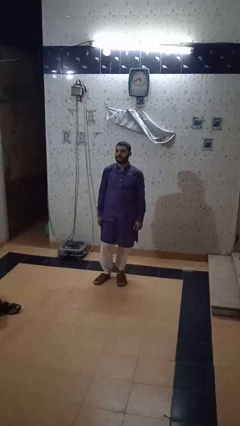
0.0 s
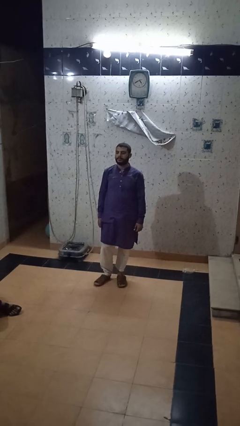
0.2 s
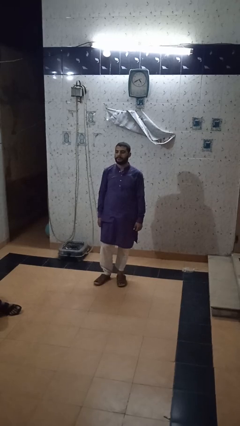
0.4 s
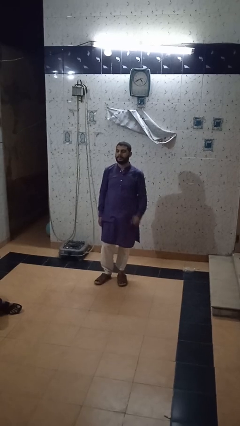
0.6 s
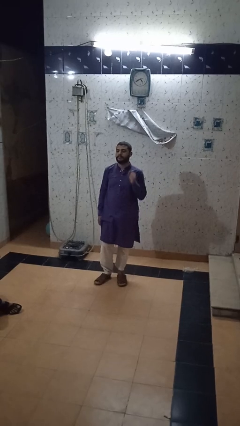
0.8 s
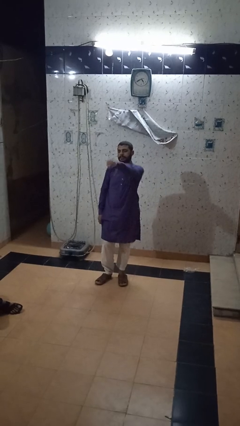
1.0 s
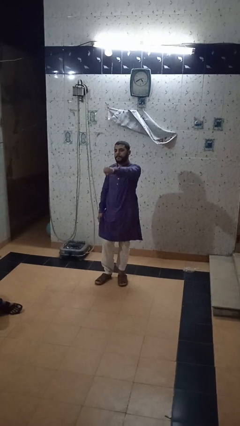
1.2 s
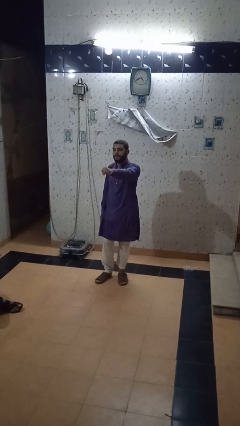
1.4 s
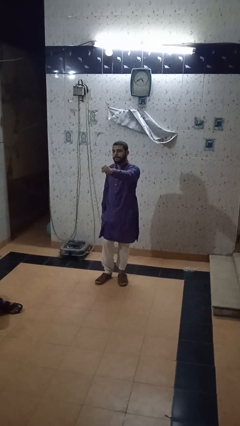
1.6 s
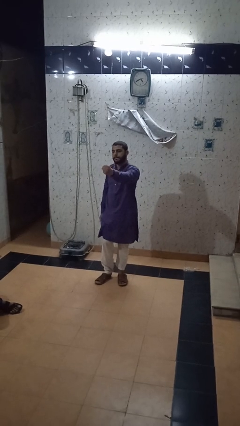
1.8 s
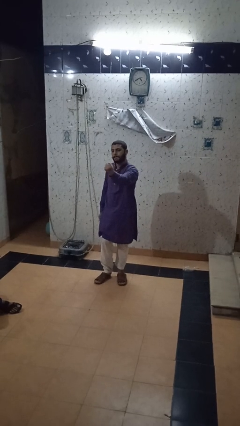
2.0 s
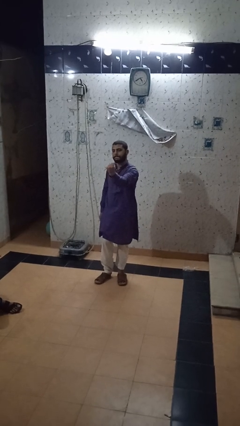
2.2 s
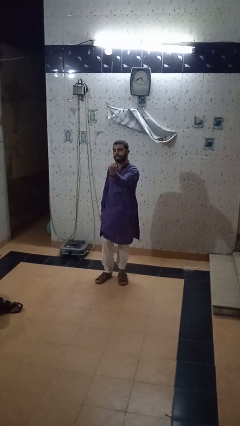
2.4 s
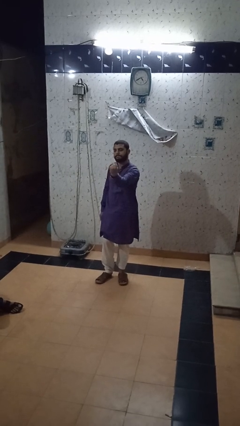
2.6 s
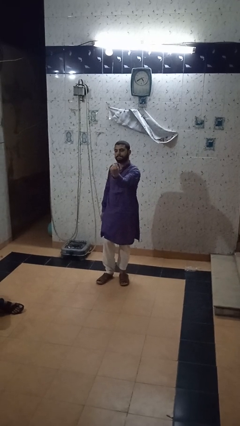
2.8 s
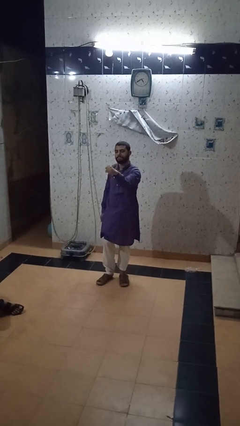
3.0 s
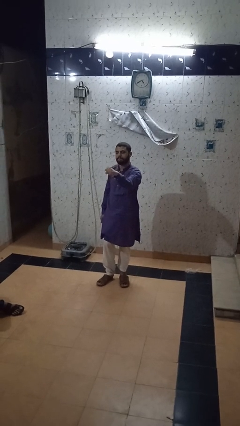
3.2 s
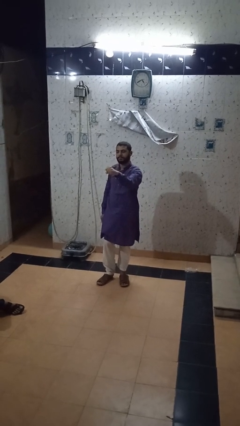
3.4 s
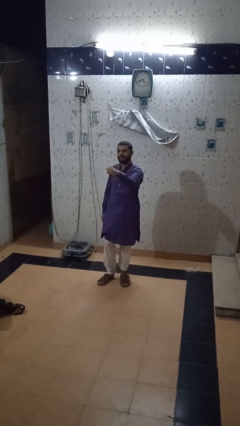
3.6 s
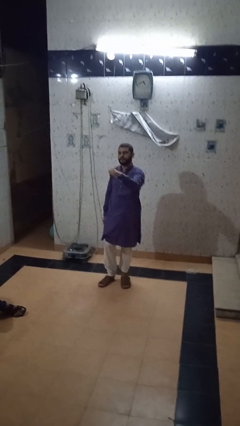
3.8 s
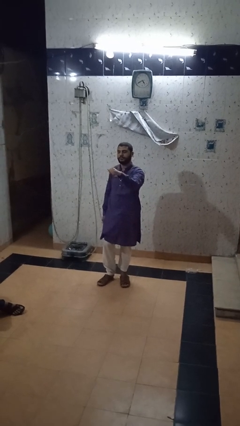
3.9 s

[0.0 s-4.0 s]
person punches

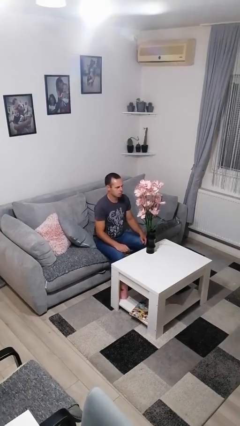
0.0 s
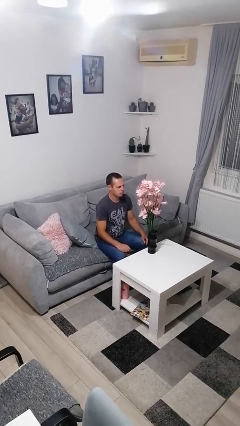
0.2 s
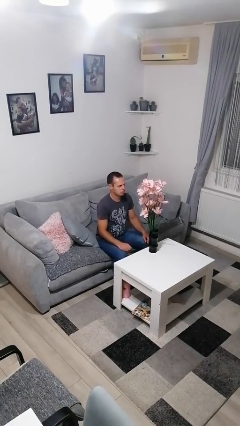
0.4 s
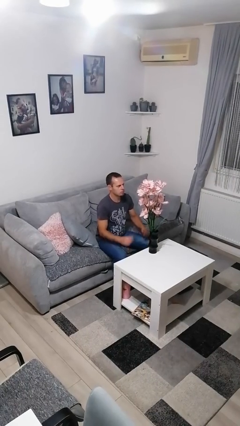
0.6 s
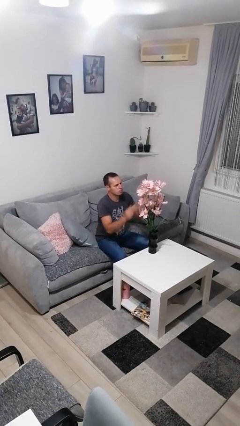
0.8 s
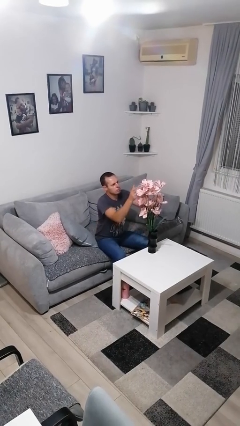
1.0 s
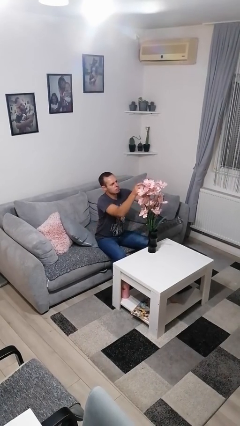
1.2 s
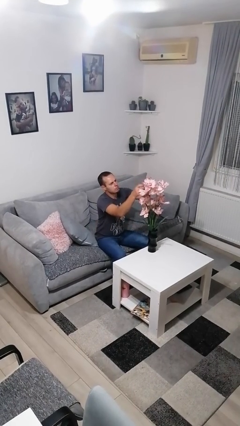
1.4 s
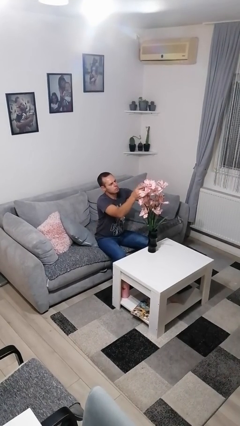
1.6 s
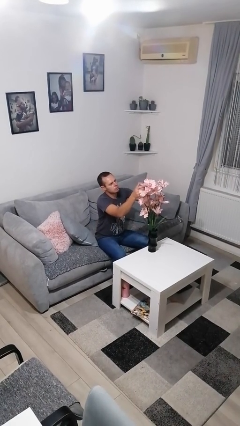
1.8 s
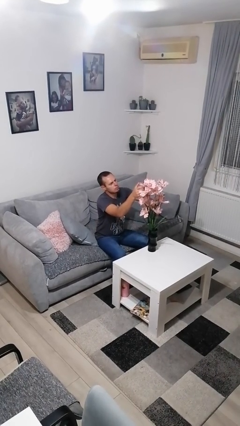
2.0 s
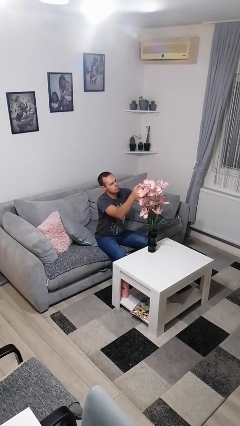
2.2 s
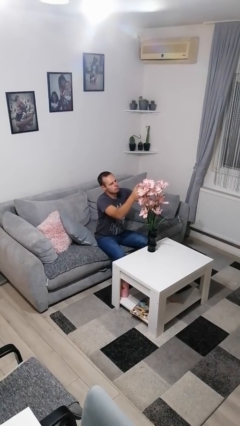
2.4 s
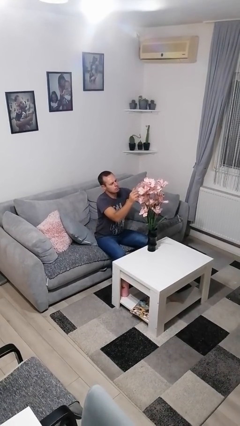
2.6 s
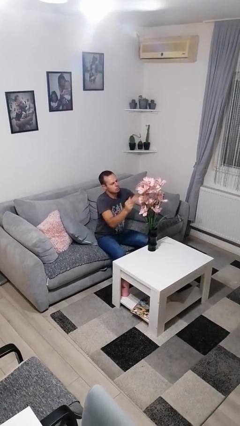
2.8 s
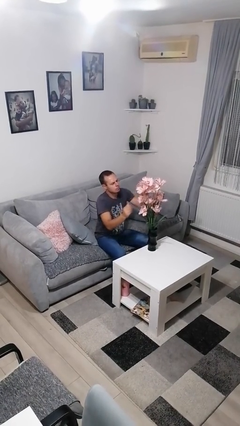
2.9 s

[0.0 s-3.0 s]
person arranges flowers in vase

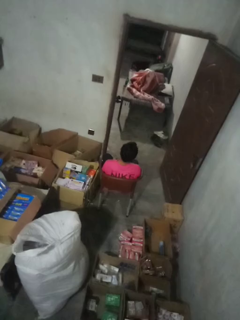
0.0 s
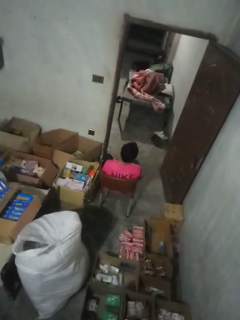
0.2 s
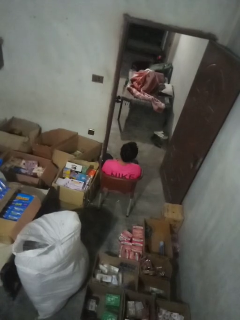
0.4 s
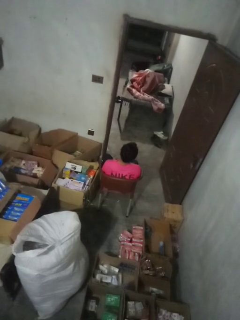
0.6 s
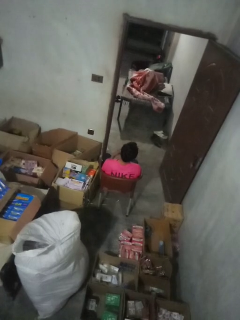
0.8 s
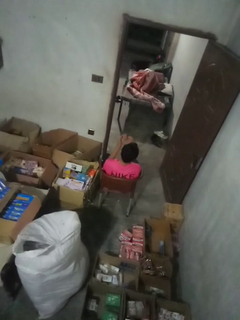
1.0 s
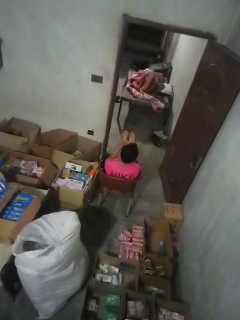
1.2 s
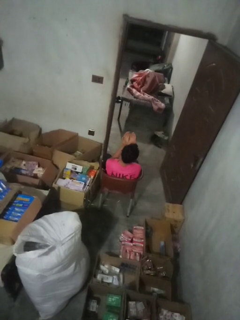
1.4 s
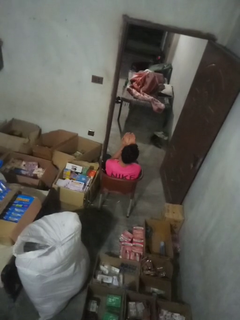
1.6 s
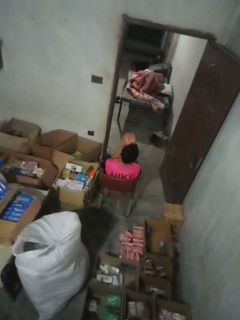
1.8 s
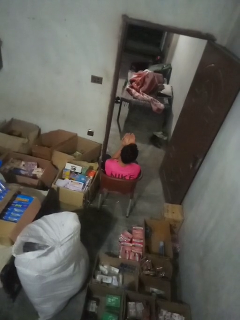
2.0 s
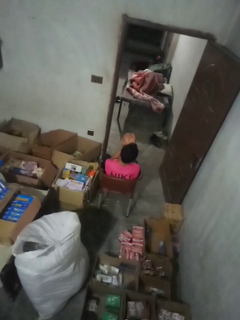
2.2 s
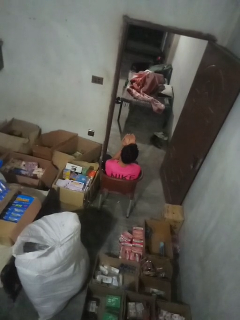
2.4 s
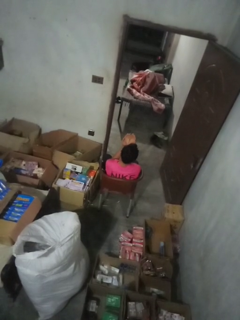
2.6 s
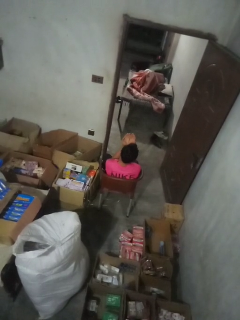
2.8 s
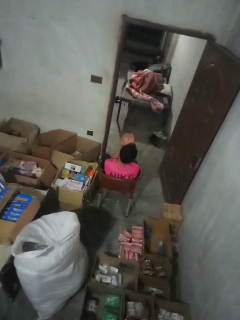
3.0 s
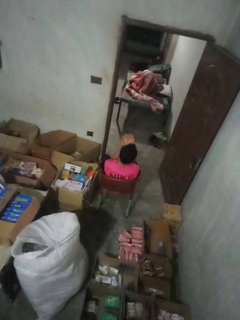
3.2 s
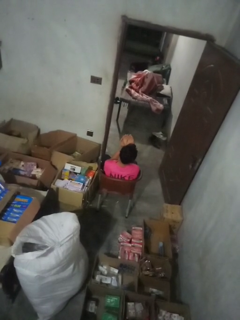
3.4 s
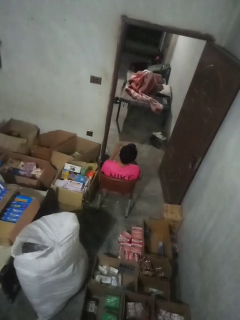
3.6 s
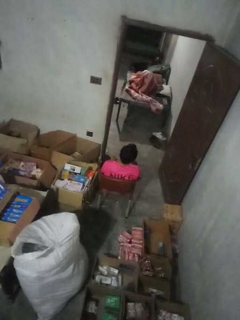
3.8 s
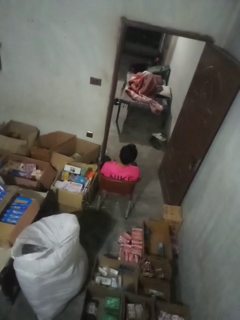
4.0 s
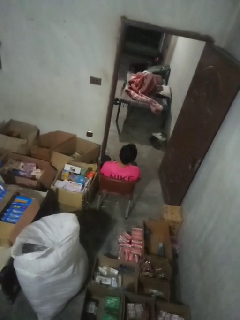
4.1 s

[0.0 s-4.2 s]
person prays

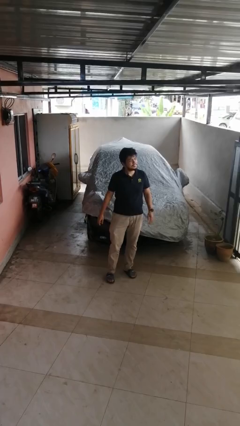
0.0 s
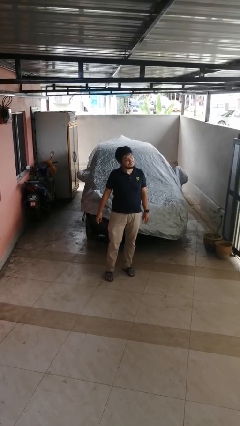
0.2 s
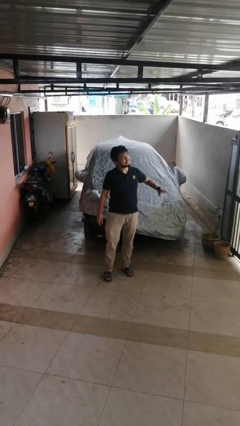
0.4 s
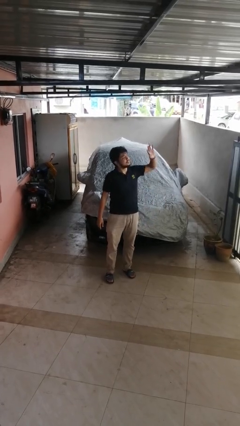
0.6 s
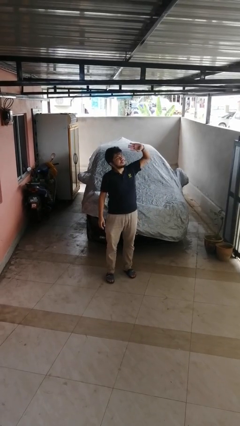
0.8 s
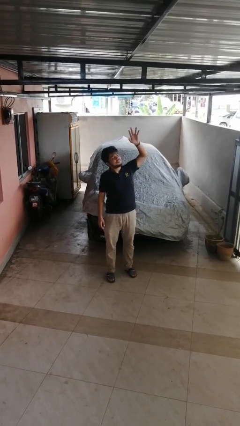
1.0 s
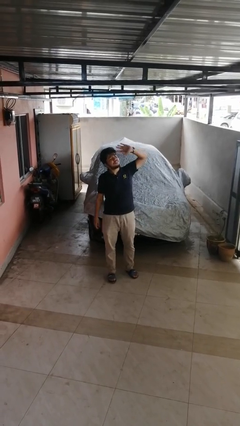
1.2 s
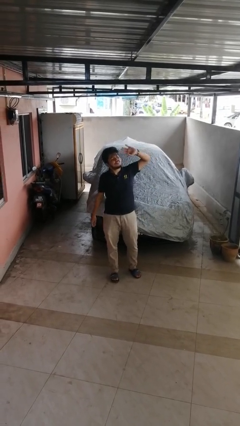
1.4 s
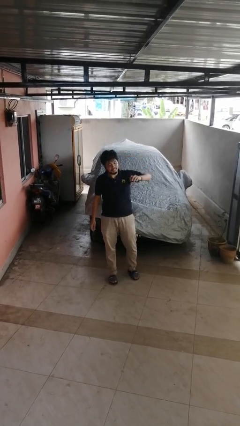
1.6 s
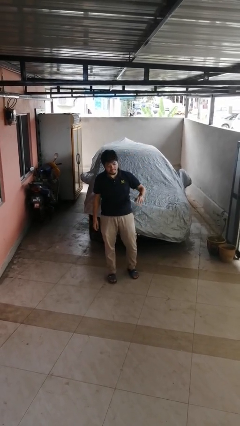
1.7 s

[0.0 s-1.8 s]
person waves at person

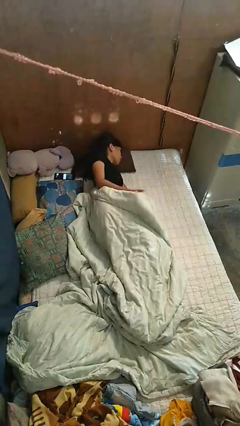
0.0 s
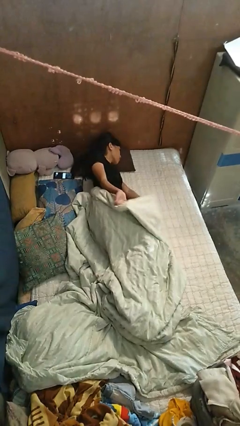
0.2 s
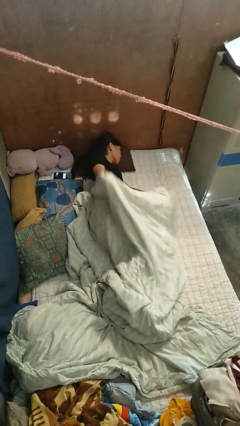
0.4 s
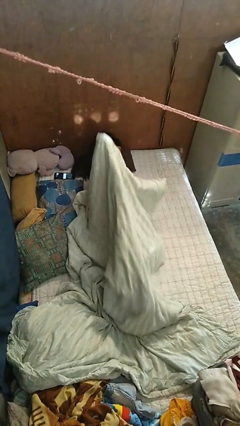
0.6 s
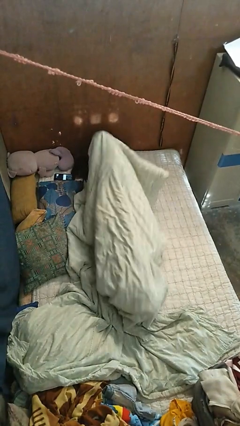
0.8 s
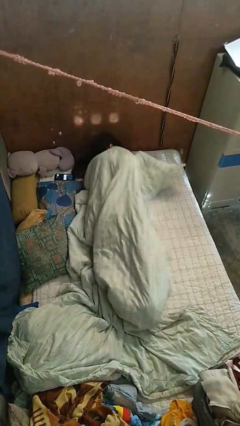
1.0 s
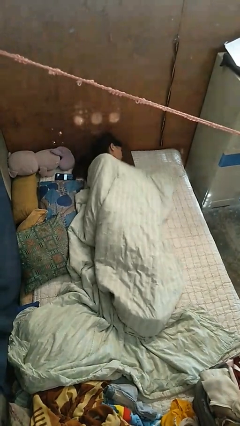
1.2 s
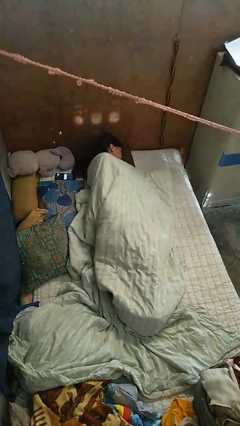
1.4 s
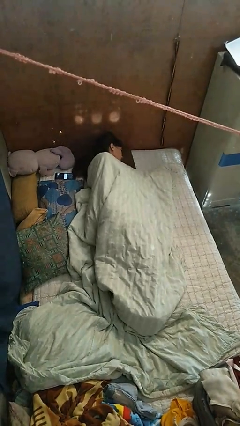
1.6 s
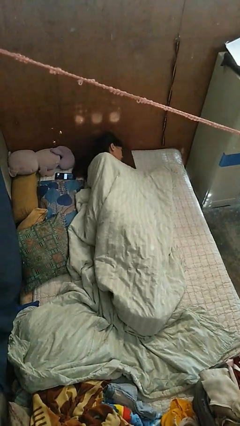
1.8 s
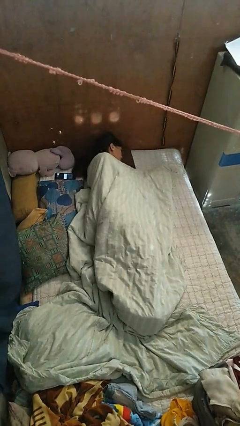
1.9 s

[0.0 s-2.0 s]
person covers with bedsheets

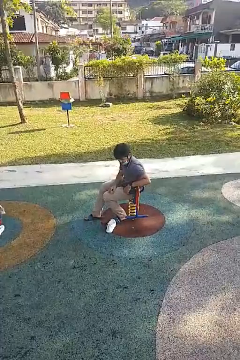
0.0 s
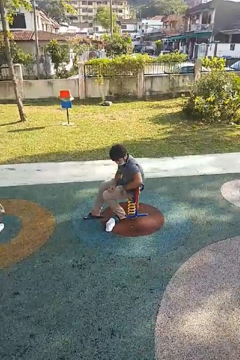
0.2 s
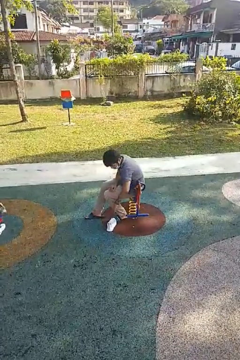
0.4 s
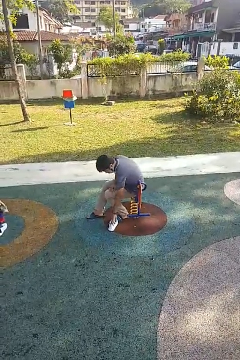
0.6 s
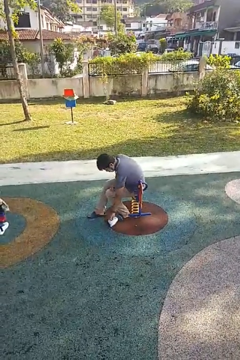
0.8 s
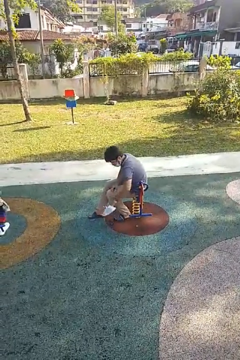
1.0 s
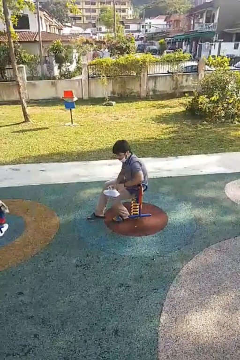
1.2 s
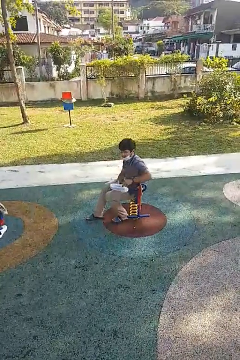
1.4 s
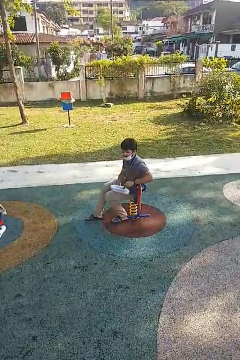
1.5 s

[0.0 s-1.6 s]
person picks up object from floor

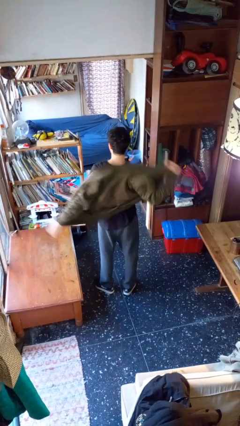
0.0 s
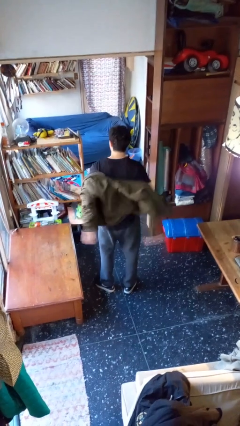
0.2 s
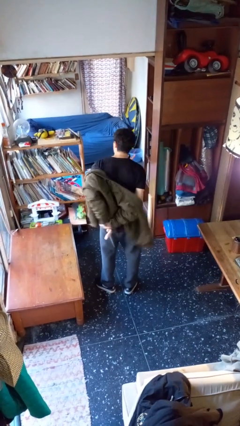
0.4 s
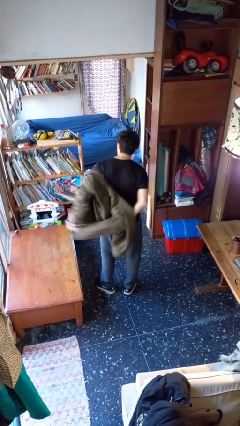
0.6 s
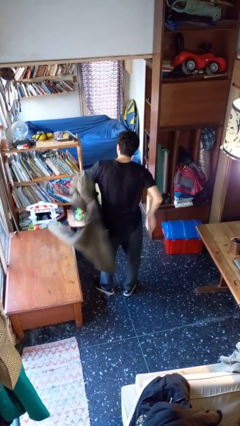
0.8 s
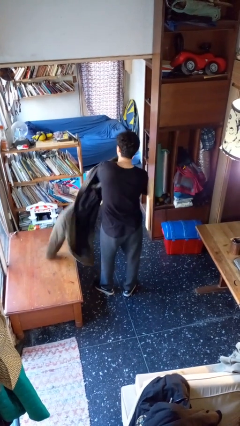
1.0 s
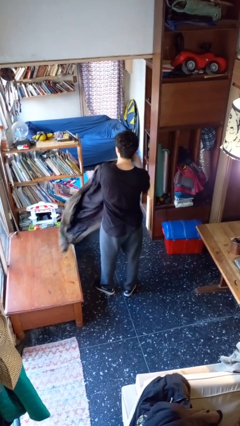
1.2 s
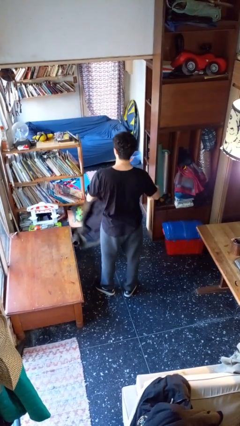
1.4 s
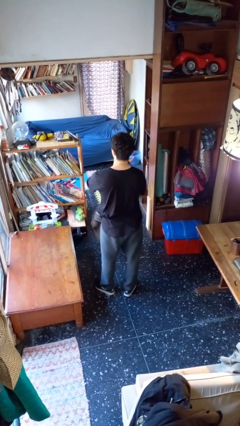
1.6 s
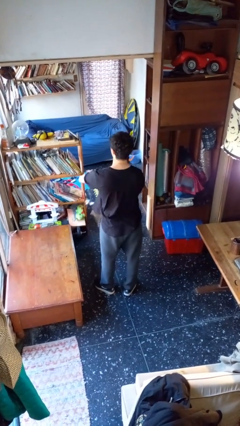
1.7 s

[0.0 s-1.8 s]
person takes off jacket
